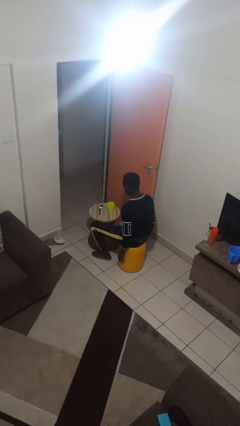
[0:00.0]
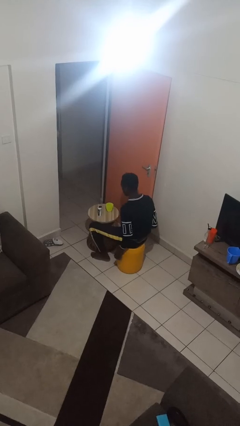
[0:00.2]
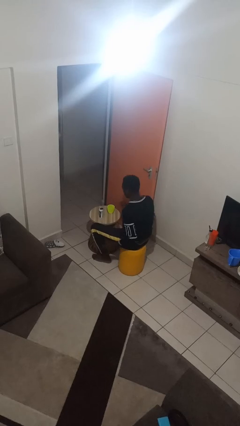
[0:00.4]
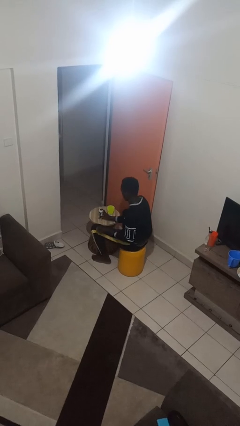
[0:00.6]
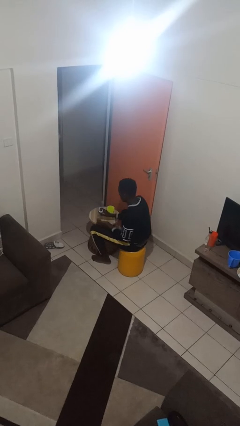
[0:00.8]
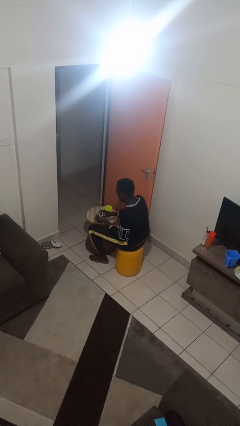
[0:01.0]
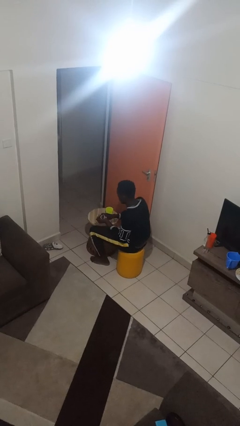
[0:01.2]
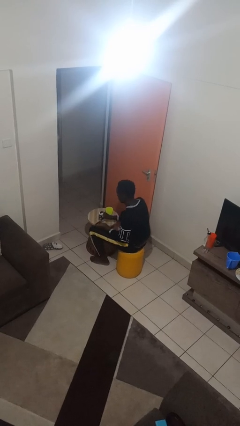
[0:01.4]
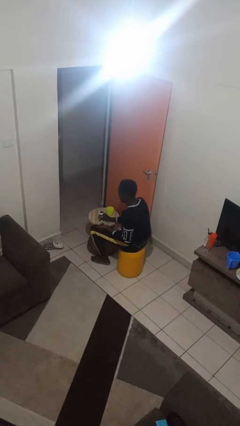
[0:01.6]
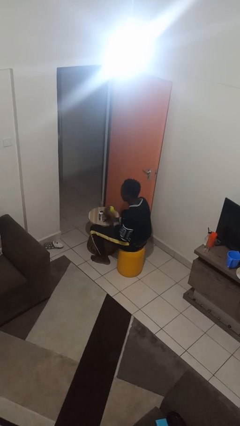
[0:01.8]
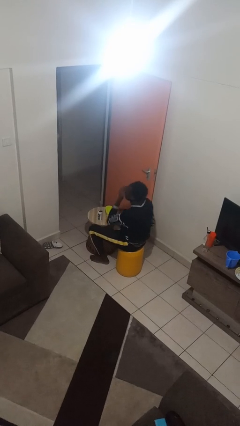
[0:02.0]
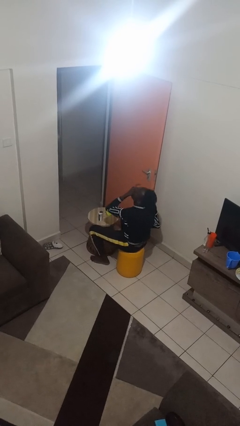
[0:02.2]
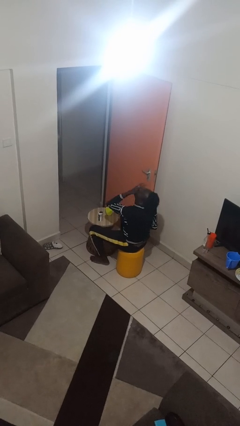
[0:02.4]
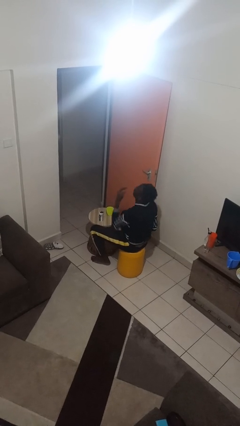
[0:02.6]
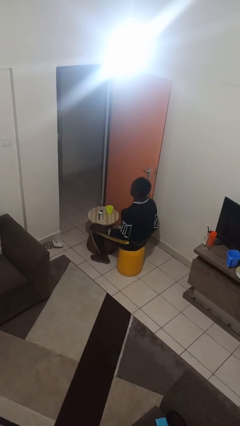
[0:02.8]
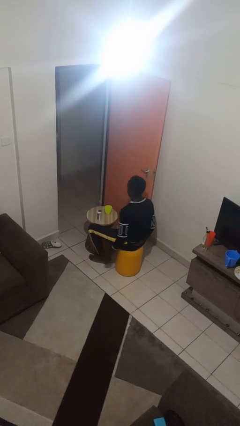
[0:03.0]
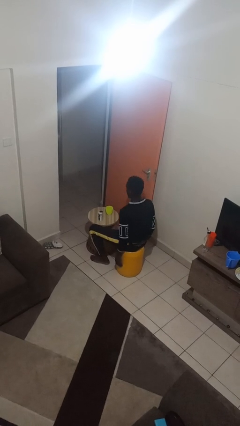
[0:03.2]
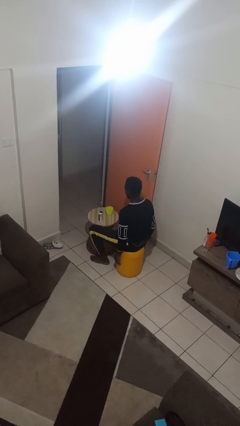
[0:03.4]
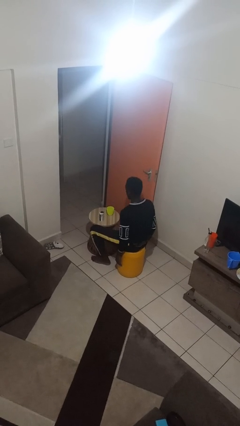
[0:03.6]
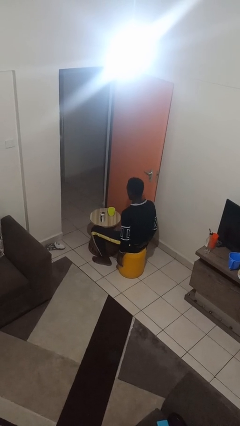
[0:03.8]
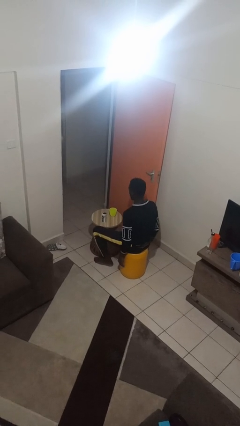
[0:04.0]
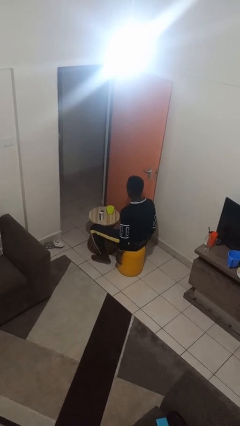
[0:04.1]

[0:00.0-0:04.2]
person takes medicine pills

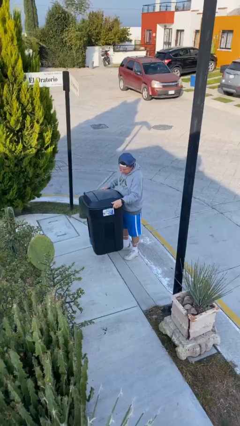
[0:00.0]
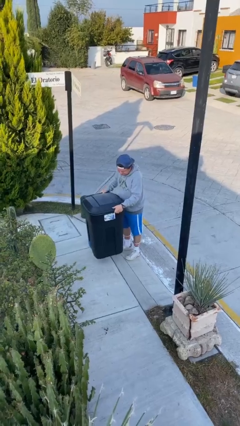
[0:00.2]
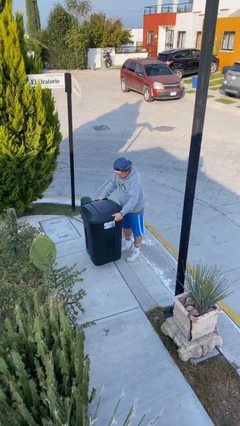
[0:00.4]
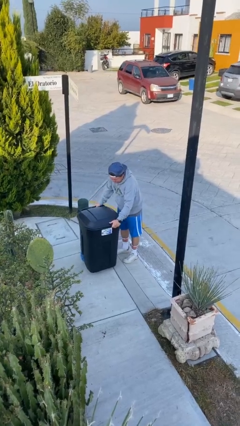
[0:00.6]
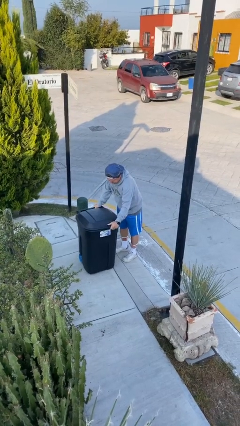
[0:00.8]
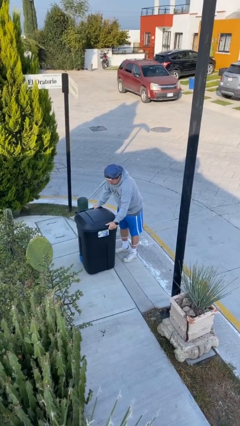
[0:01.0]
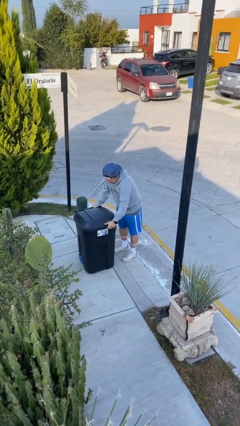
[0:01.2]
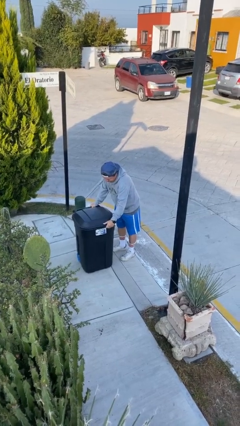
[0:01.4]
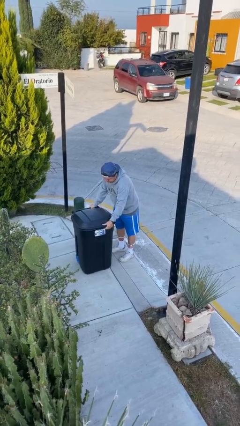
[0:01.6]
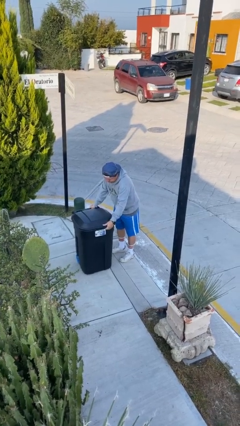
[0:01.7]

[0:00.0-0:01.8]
person puts down object on floor

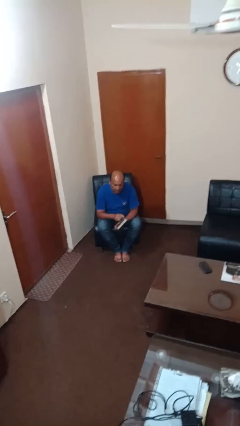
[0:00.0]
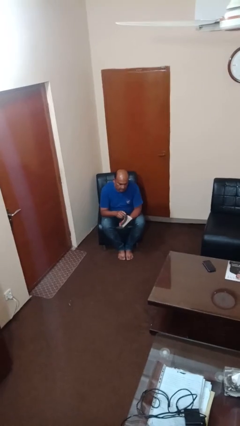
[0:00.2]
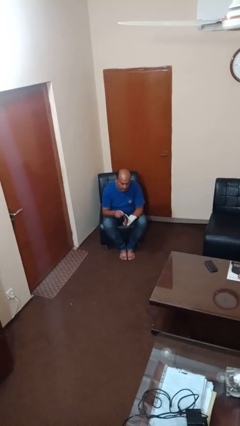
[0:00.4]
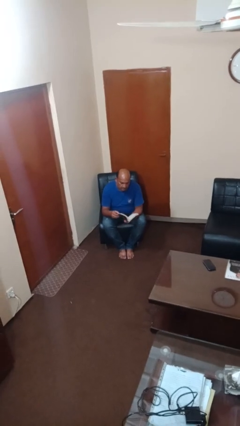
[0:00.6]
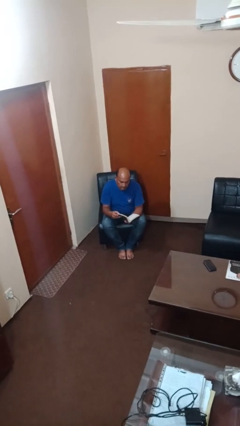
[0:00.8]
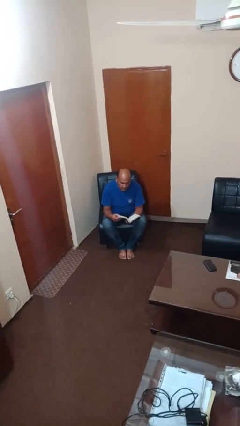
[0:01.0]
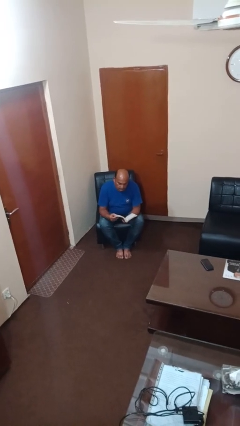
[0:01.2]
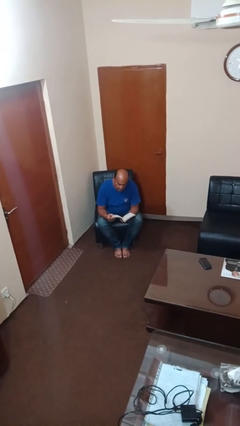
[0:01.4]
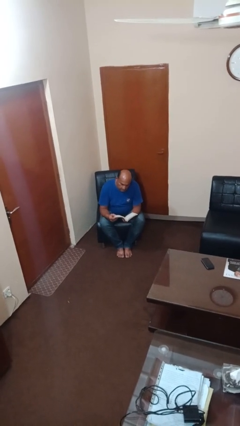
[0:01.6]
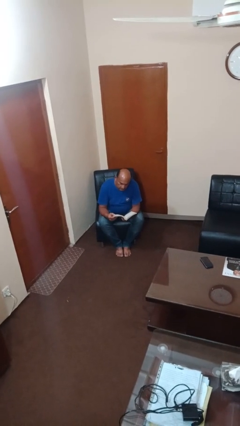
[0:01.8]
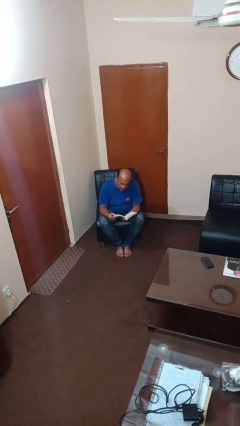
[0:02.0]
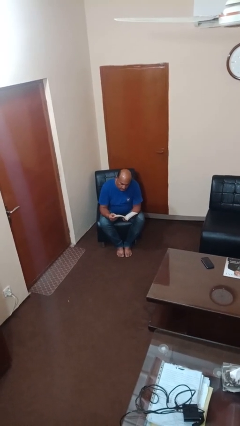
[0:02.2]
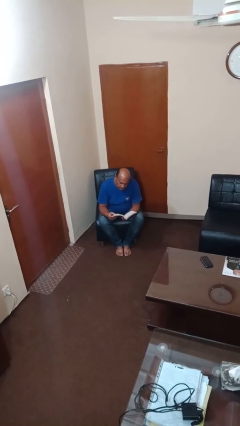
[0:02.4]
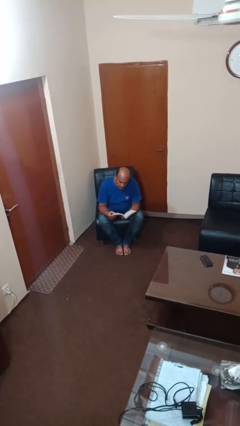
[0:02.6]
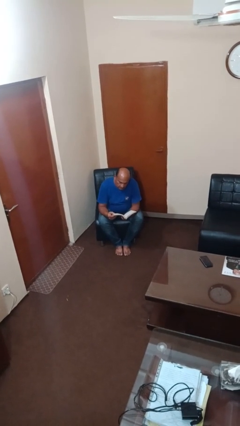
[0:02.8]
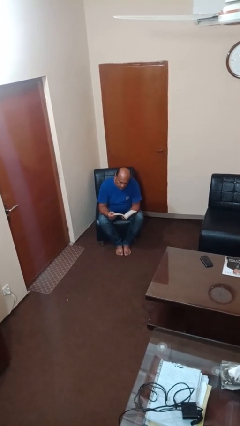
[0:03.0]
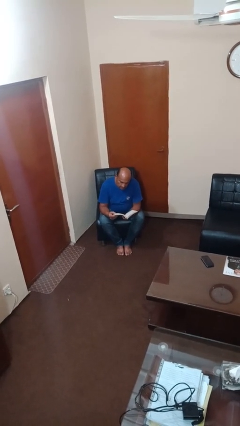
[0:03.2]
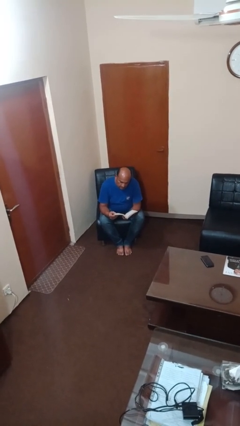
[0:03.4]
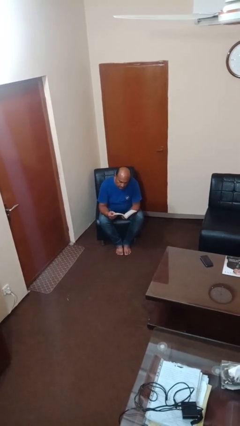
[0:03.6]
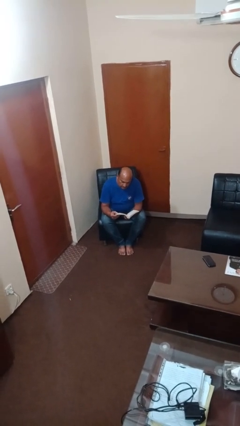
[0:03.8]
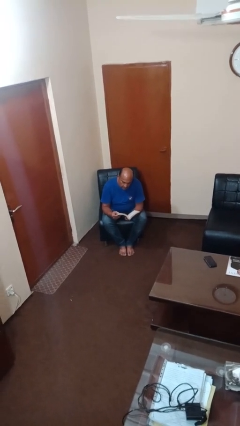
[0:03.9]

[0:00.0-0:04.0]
person reads book

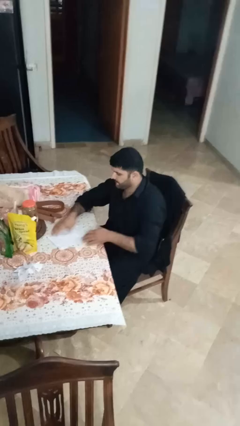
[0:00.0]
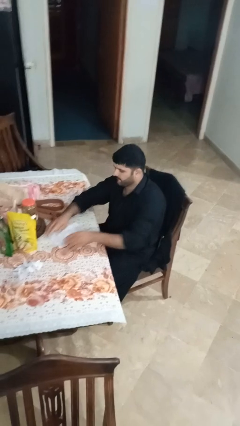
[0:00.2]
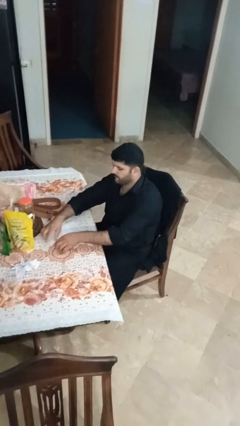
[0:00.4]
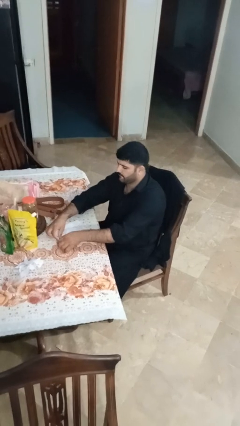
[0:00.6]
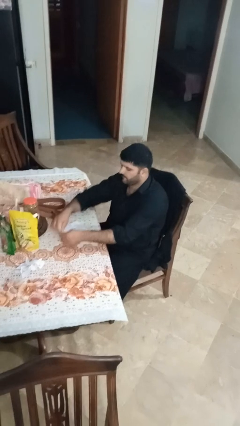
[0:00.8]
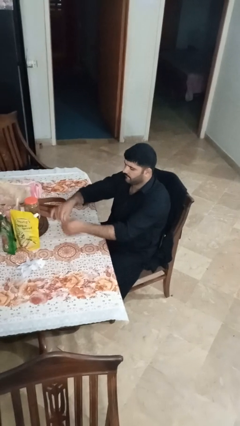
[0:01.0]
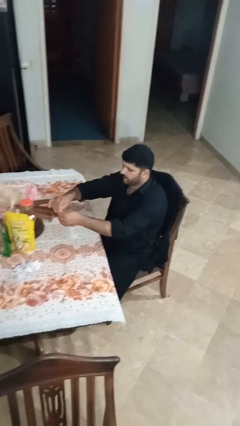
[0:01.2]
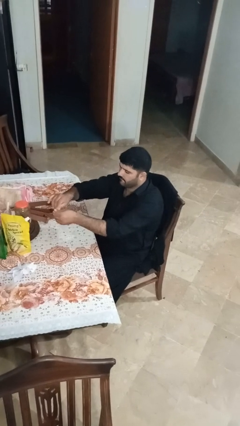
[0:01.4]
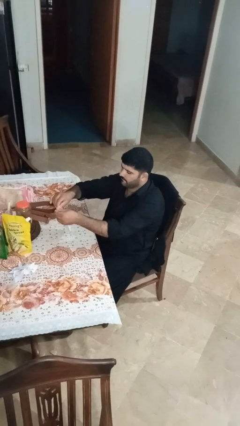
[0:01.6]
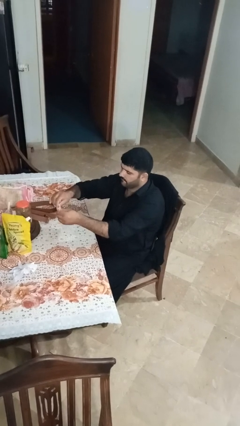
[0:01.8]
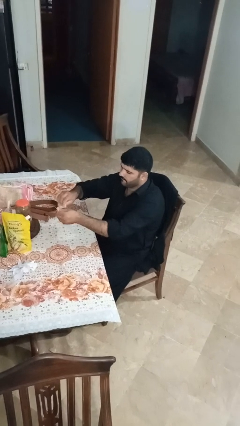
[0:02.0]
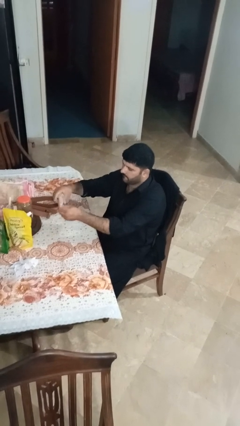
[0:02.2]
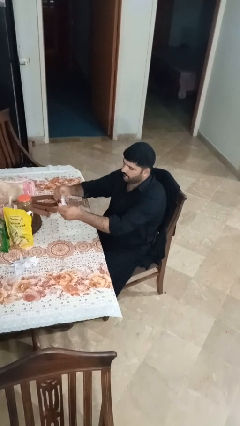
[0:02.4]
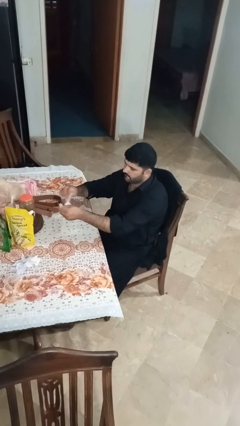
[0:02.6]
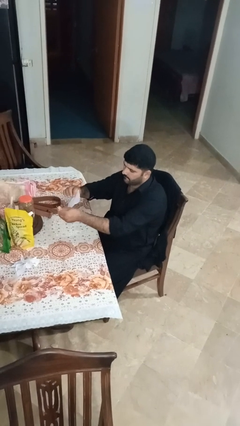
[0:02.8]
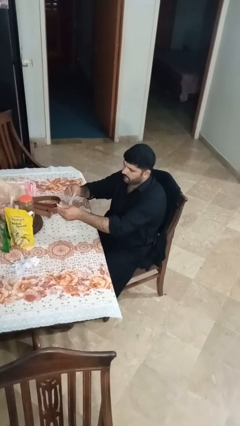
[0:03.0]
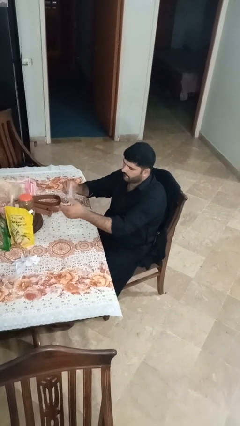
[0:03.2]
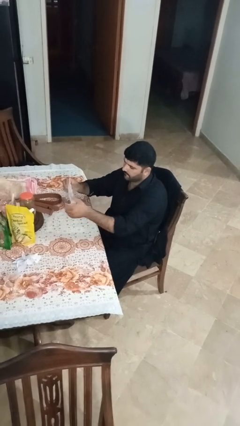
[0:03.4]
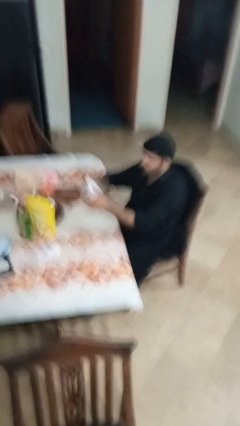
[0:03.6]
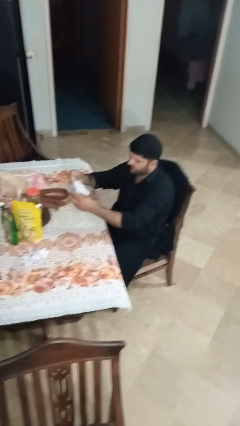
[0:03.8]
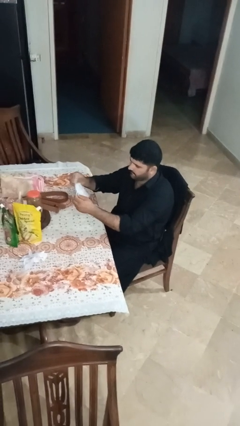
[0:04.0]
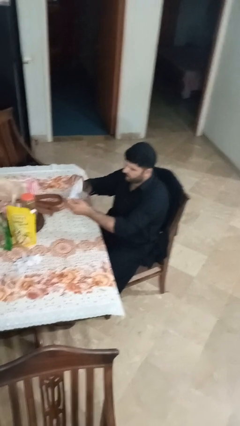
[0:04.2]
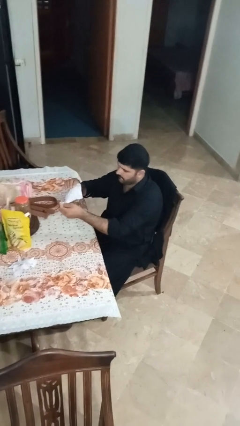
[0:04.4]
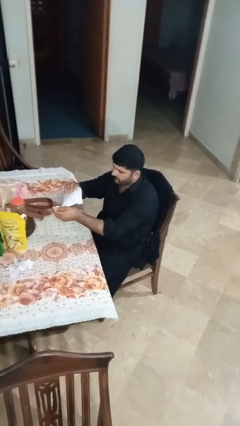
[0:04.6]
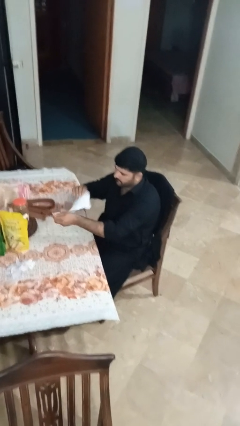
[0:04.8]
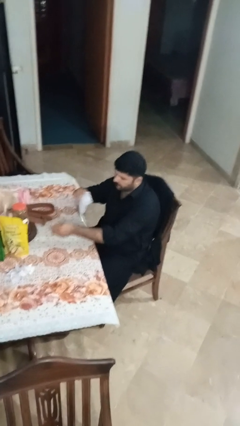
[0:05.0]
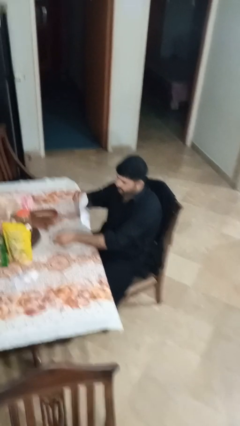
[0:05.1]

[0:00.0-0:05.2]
person tears paper

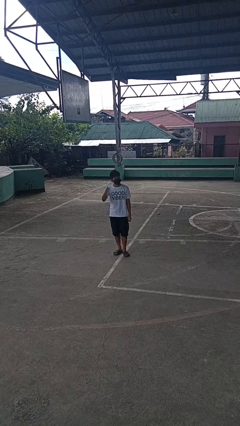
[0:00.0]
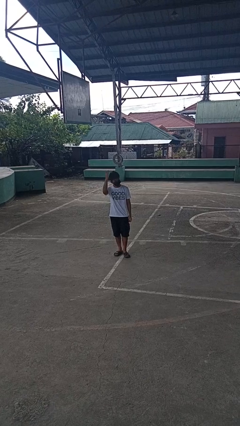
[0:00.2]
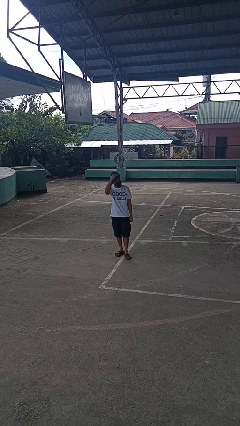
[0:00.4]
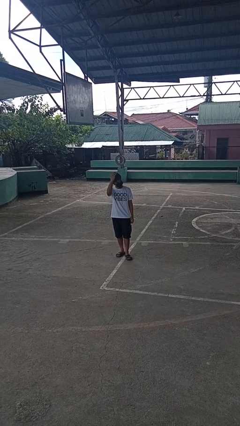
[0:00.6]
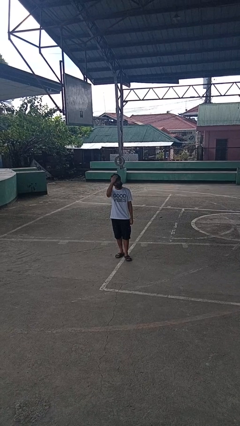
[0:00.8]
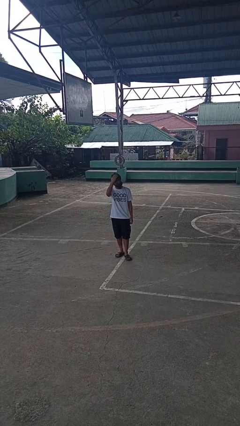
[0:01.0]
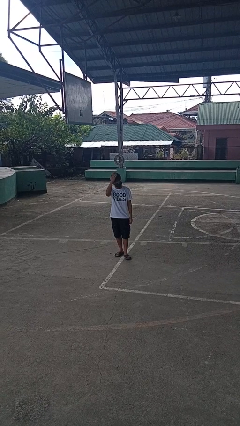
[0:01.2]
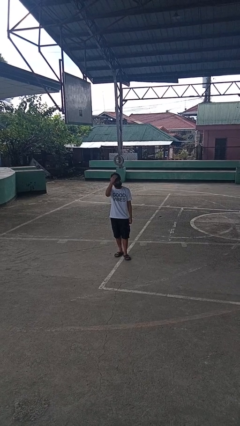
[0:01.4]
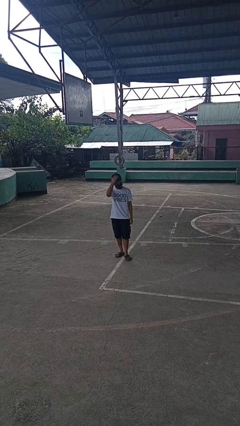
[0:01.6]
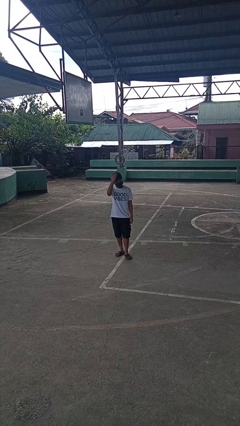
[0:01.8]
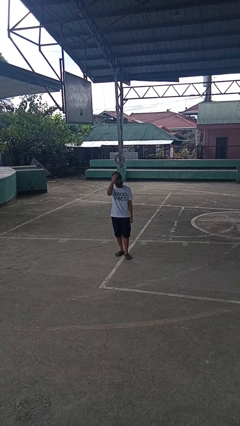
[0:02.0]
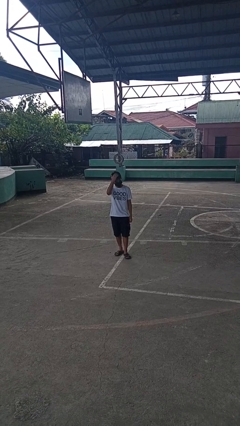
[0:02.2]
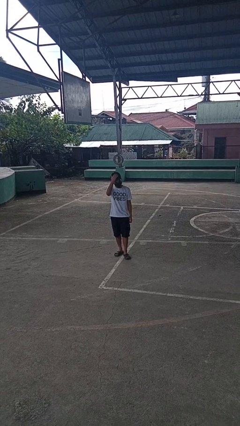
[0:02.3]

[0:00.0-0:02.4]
person pats head
